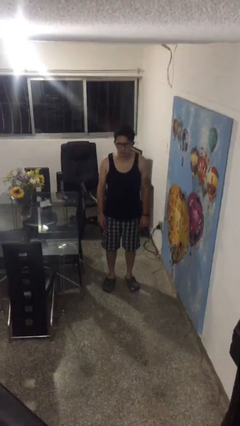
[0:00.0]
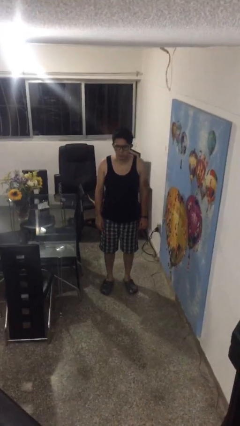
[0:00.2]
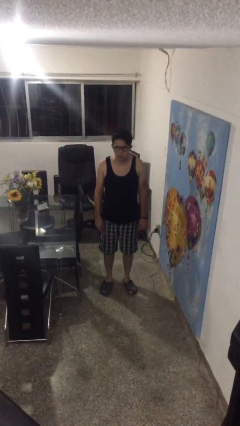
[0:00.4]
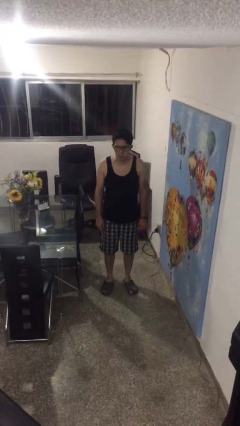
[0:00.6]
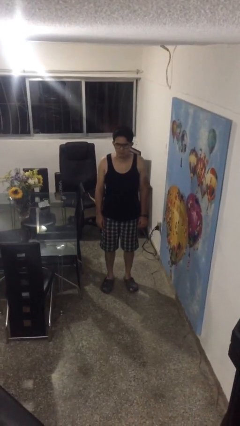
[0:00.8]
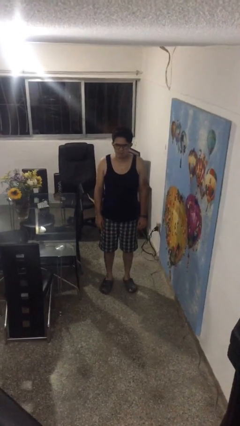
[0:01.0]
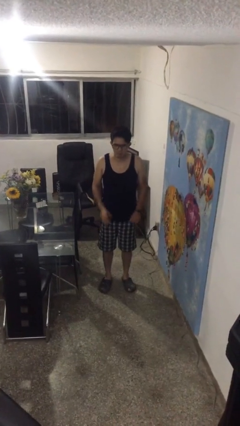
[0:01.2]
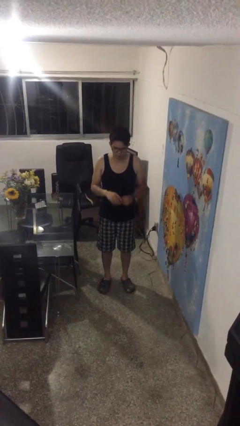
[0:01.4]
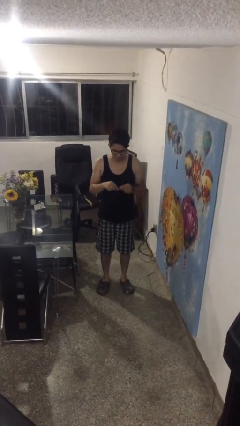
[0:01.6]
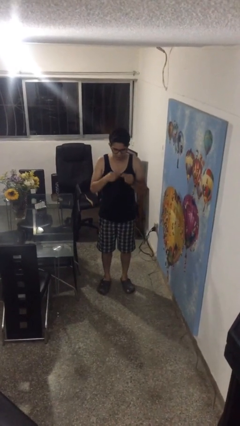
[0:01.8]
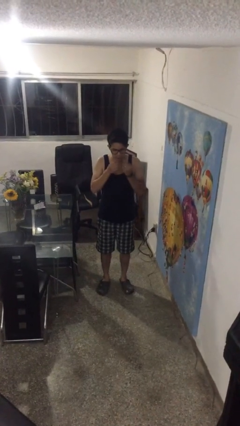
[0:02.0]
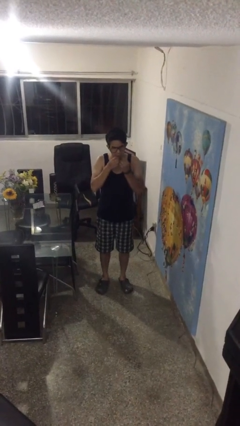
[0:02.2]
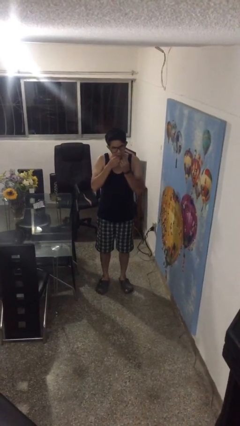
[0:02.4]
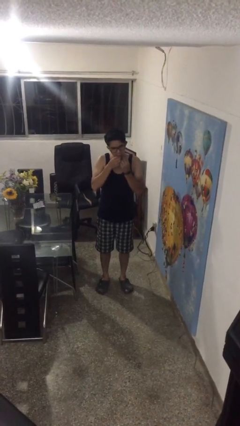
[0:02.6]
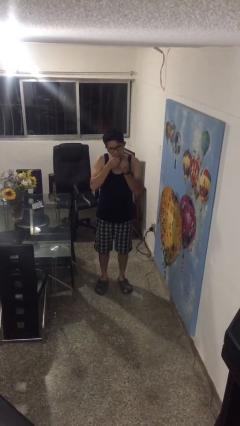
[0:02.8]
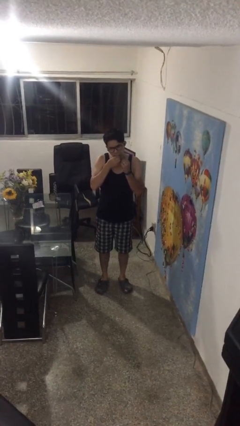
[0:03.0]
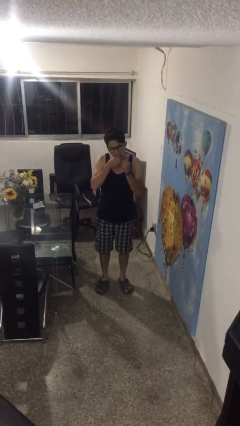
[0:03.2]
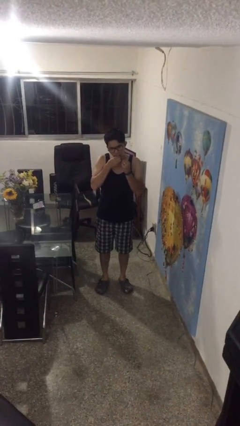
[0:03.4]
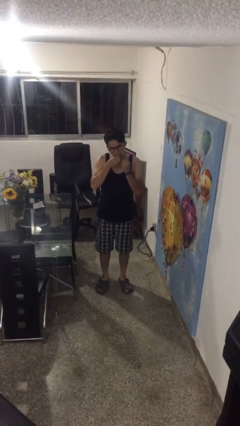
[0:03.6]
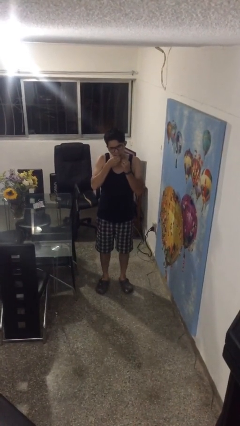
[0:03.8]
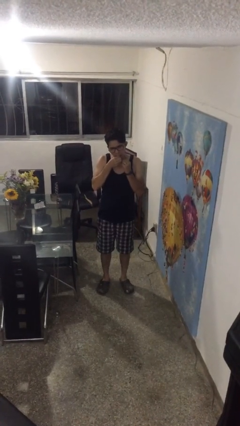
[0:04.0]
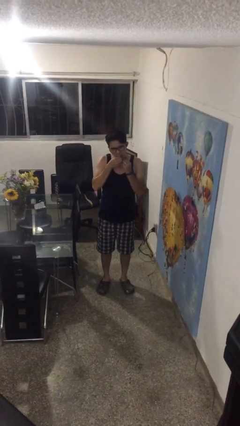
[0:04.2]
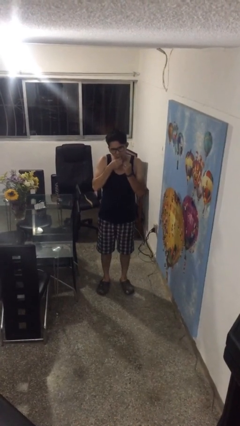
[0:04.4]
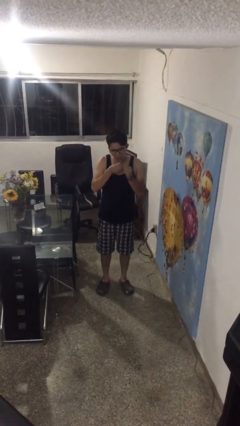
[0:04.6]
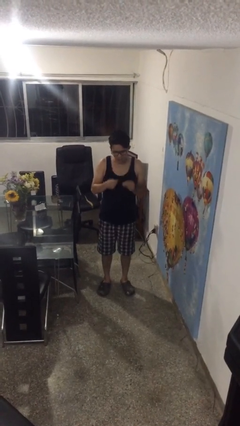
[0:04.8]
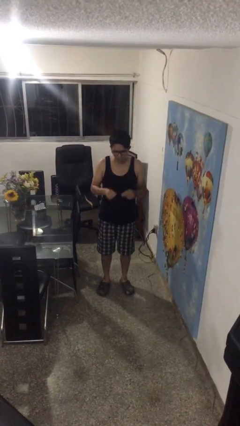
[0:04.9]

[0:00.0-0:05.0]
person flosses

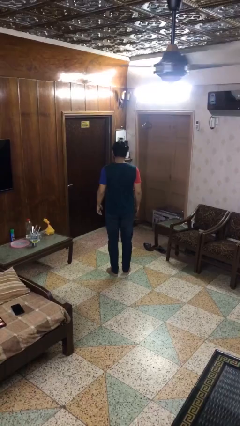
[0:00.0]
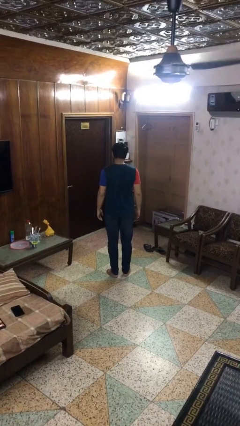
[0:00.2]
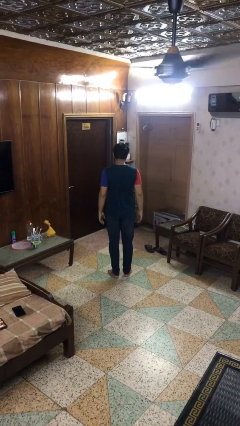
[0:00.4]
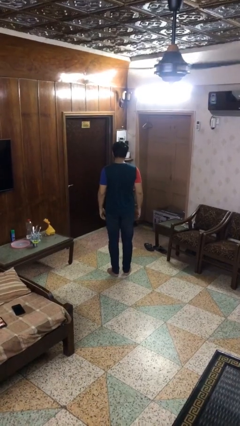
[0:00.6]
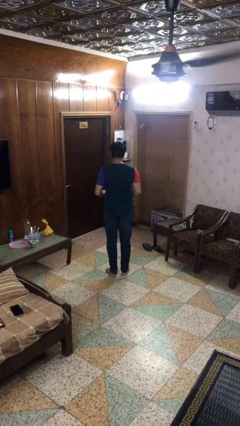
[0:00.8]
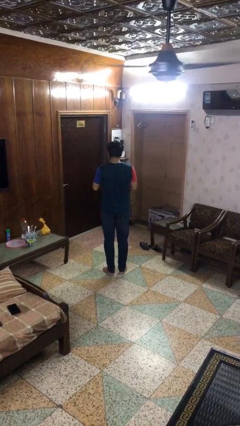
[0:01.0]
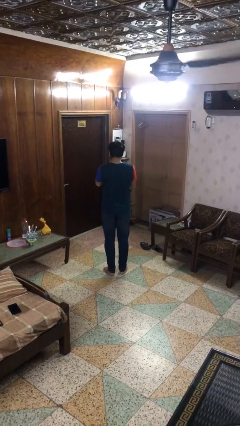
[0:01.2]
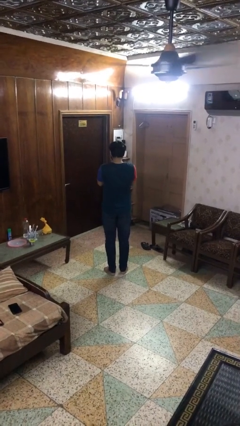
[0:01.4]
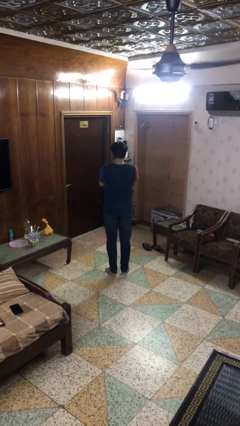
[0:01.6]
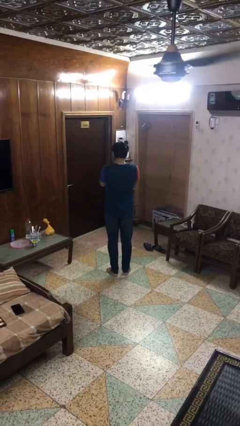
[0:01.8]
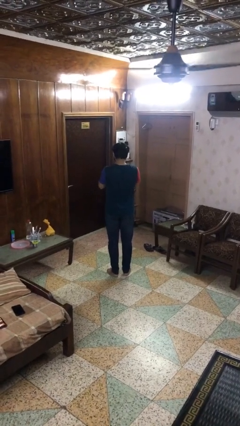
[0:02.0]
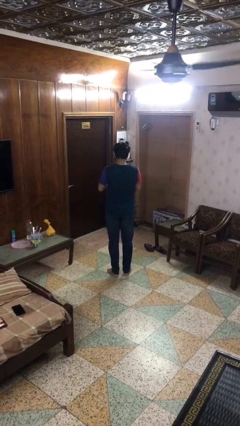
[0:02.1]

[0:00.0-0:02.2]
person sneezes into hand

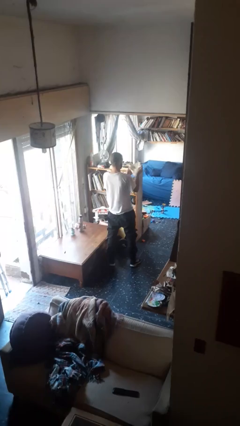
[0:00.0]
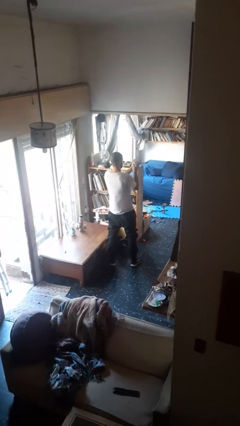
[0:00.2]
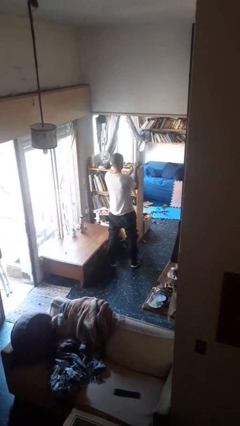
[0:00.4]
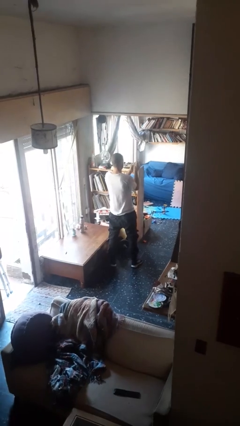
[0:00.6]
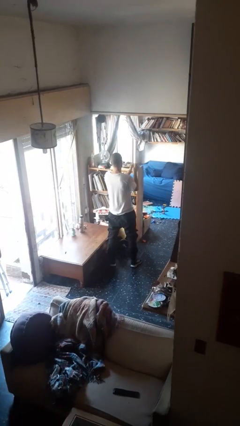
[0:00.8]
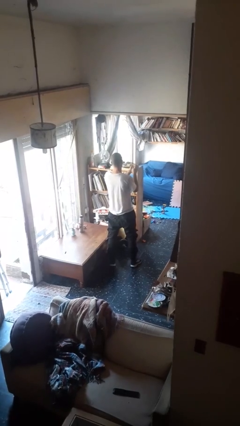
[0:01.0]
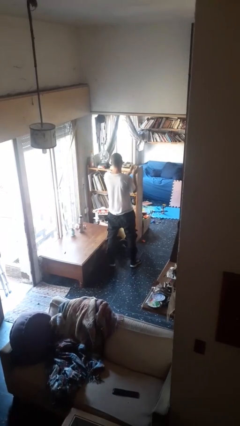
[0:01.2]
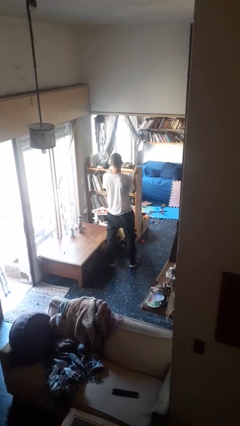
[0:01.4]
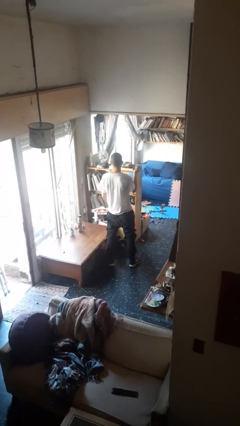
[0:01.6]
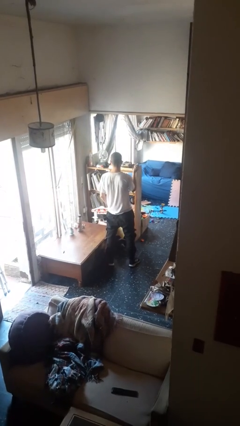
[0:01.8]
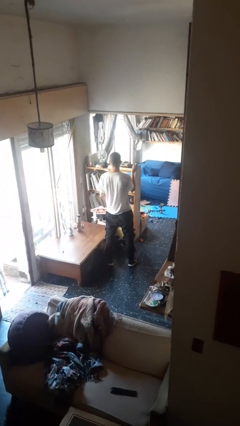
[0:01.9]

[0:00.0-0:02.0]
person crumples paper

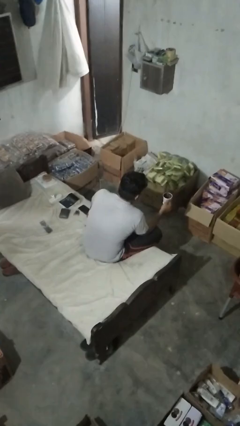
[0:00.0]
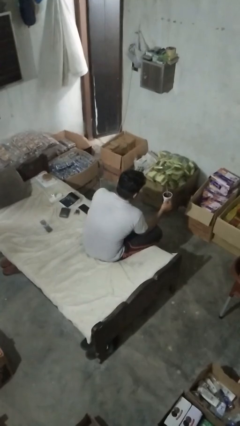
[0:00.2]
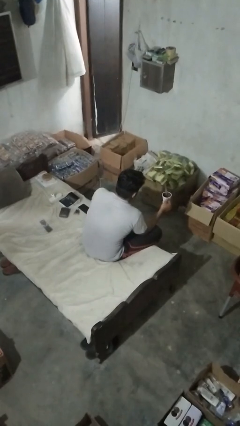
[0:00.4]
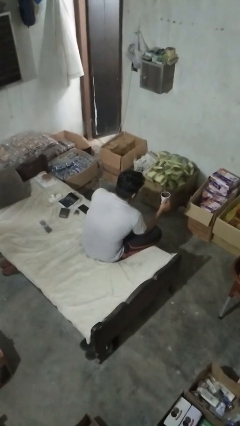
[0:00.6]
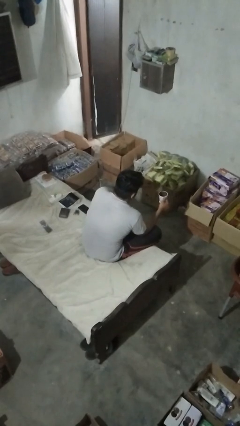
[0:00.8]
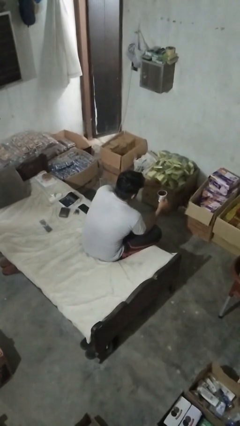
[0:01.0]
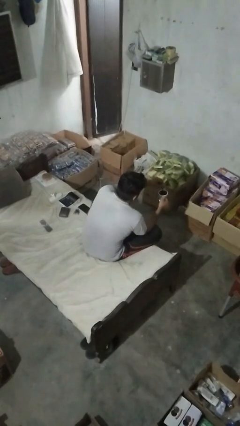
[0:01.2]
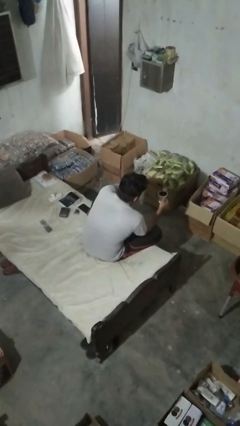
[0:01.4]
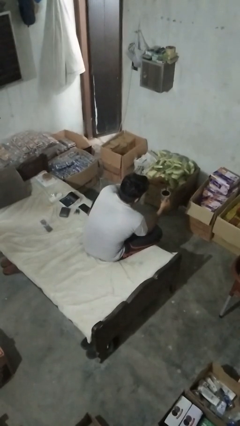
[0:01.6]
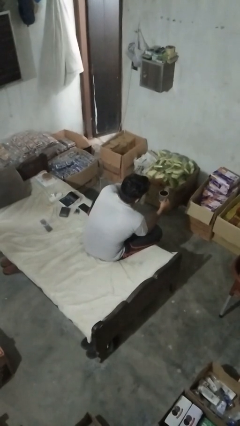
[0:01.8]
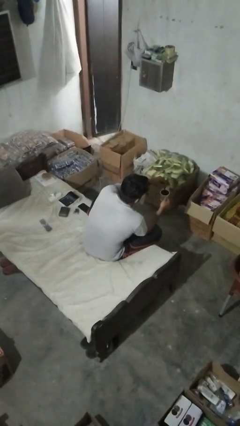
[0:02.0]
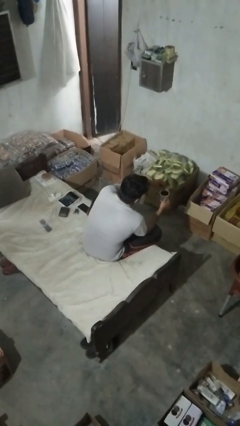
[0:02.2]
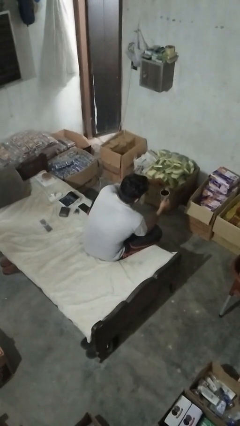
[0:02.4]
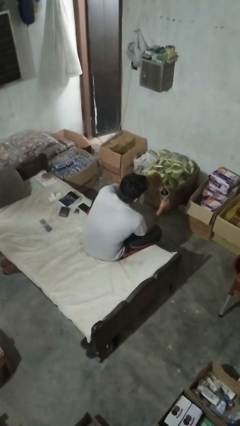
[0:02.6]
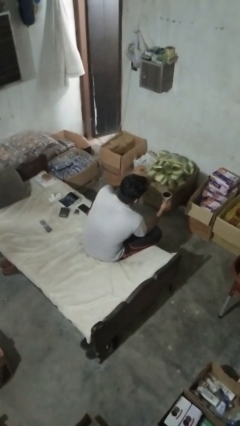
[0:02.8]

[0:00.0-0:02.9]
person stirs mug

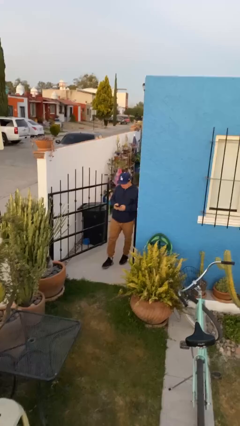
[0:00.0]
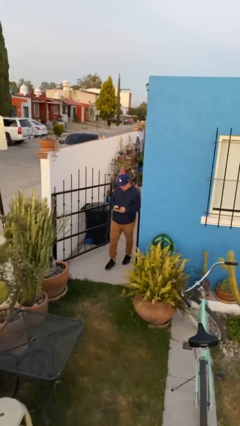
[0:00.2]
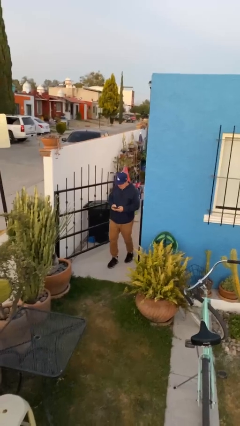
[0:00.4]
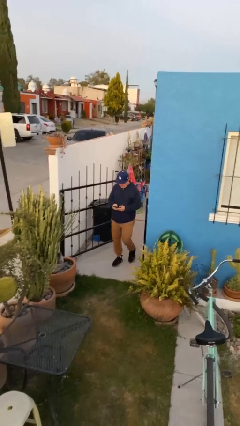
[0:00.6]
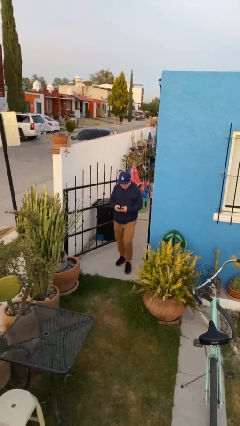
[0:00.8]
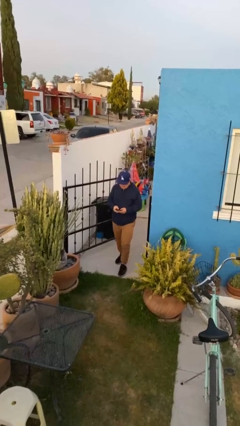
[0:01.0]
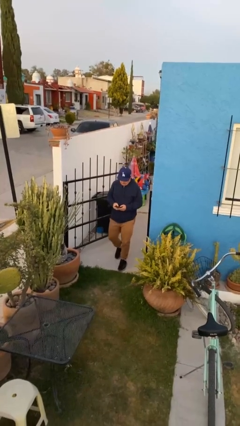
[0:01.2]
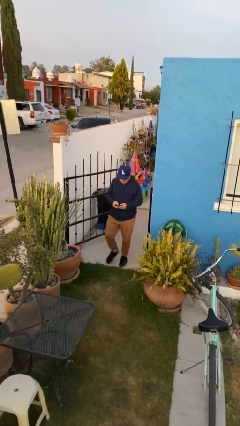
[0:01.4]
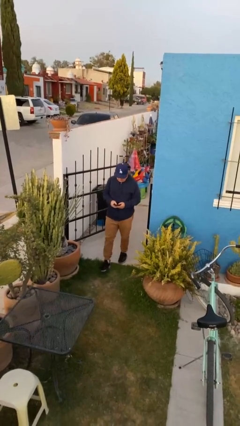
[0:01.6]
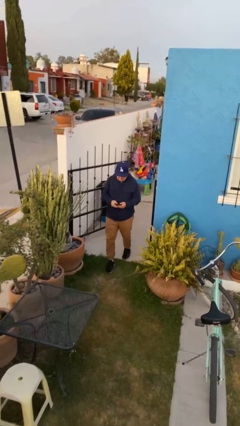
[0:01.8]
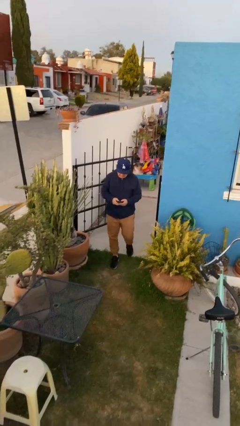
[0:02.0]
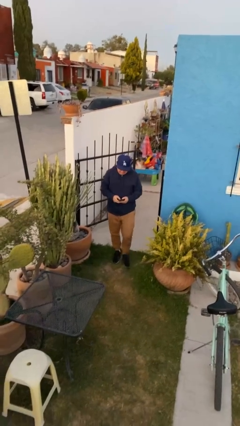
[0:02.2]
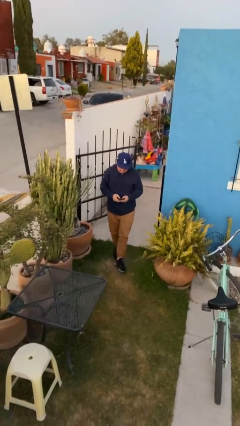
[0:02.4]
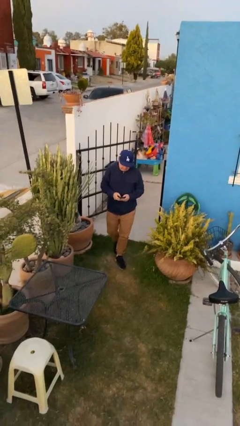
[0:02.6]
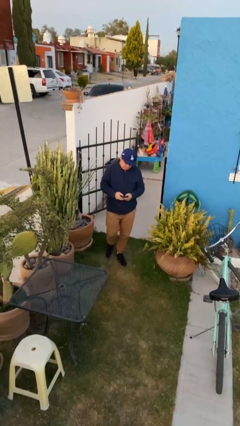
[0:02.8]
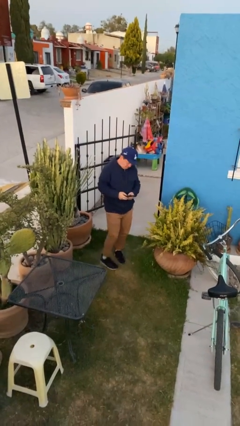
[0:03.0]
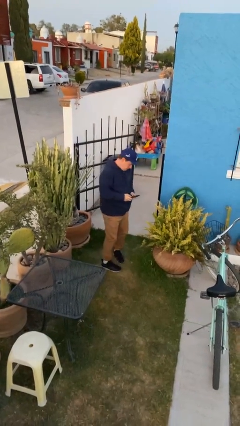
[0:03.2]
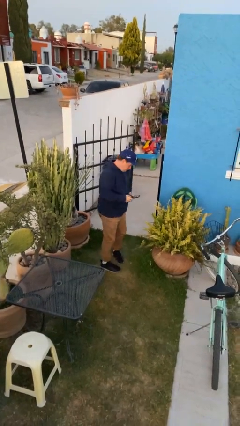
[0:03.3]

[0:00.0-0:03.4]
person enters scene through structure

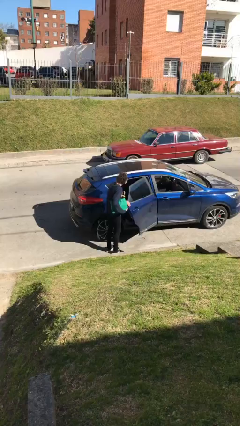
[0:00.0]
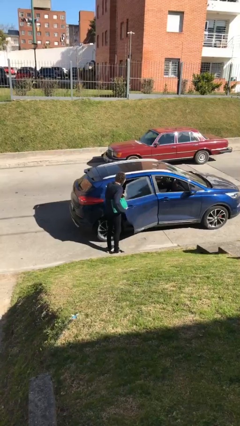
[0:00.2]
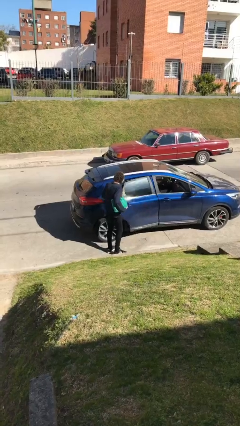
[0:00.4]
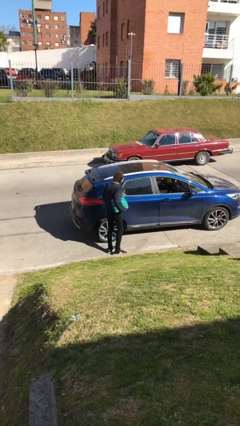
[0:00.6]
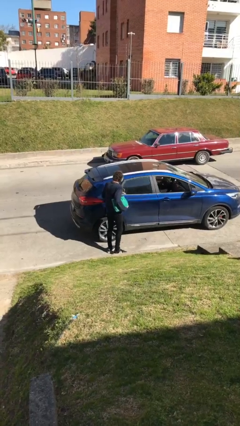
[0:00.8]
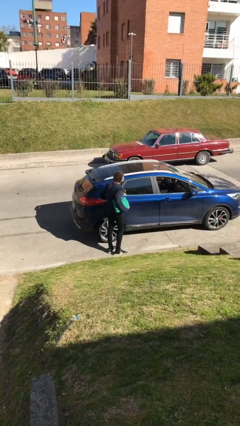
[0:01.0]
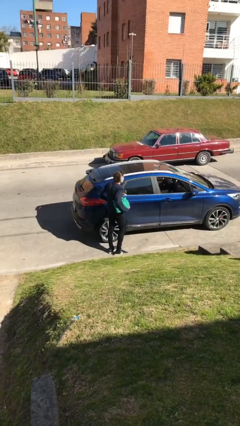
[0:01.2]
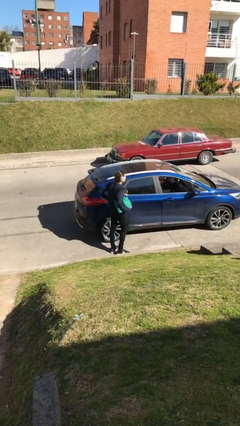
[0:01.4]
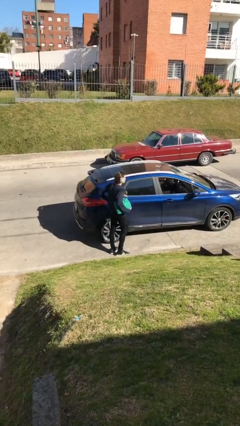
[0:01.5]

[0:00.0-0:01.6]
person closes car door

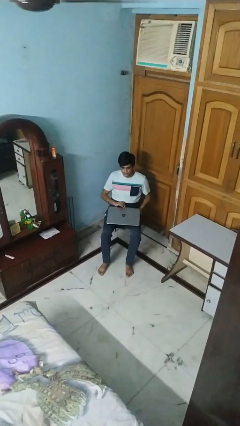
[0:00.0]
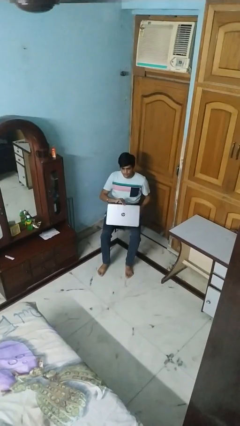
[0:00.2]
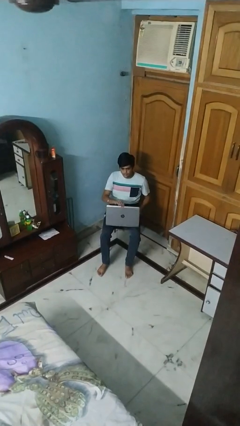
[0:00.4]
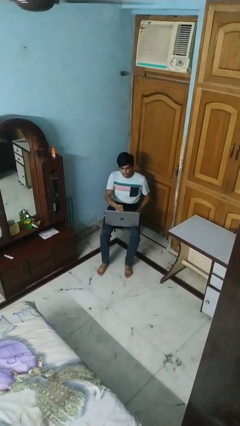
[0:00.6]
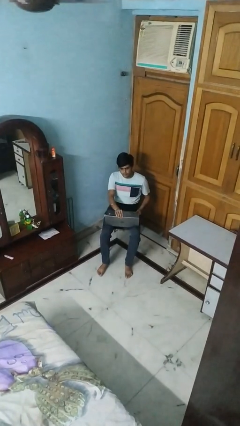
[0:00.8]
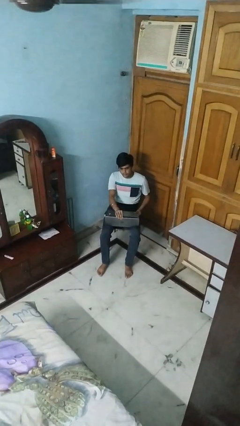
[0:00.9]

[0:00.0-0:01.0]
person opens laptop
